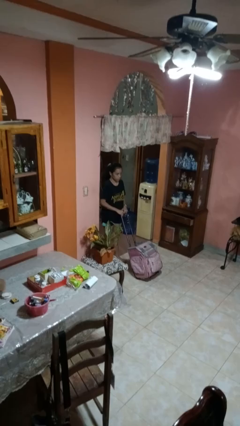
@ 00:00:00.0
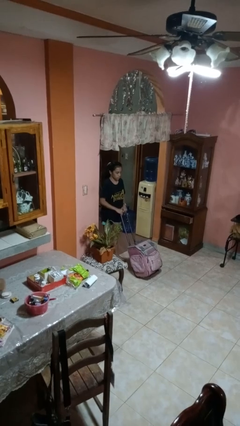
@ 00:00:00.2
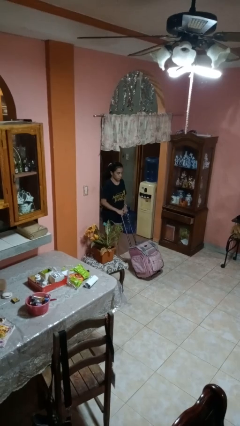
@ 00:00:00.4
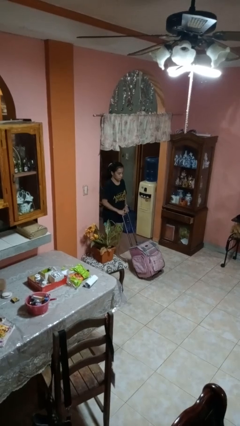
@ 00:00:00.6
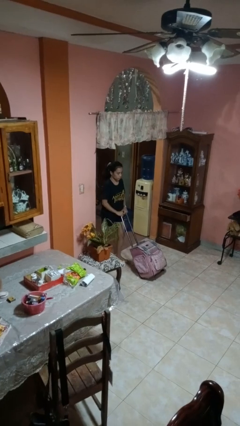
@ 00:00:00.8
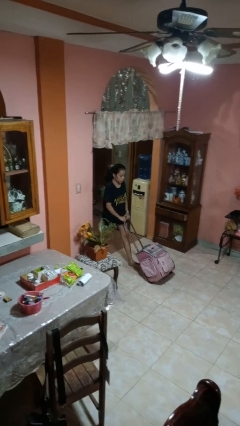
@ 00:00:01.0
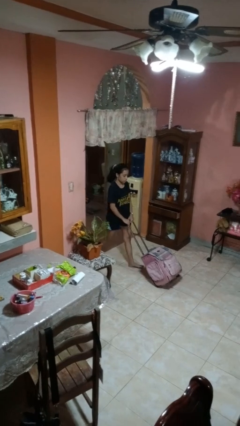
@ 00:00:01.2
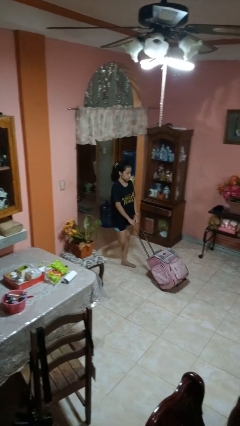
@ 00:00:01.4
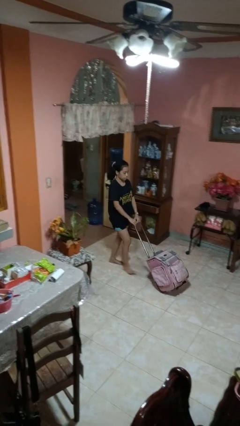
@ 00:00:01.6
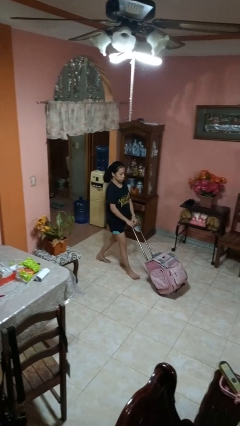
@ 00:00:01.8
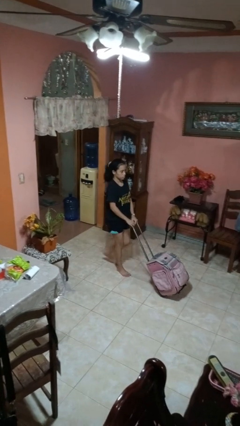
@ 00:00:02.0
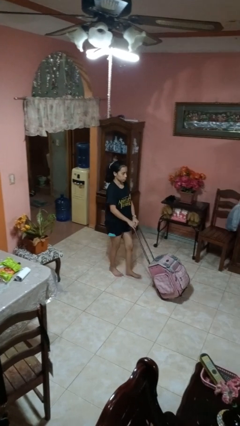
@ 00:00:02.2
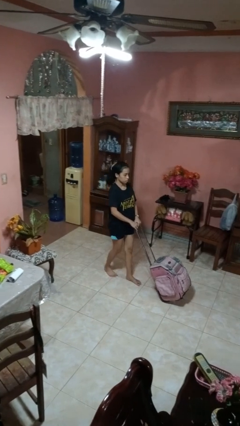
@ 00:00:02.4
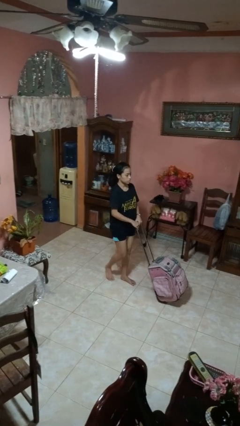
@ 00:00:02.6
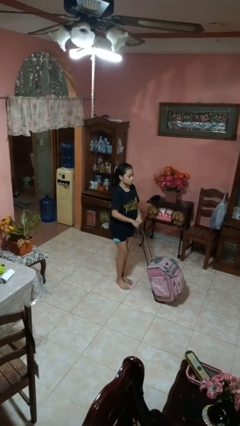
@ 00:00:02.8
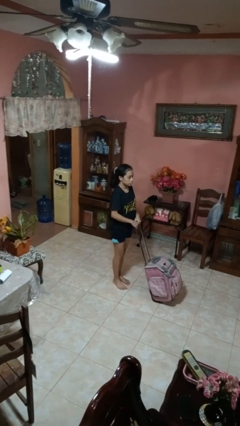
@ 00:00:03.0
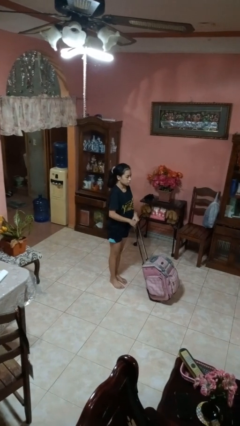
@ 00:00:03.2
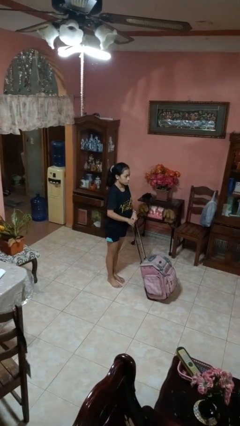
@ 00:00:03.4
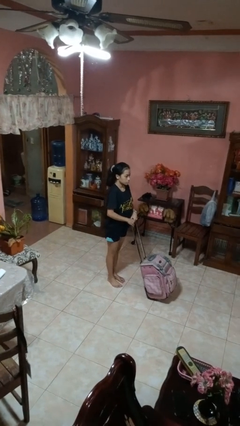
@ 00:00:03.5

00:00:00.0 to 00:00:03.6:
person pushes wheeled cart

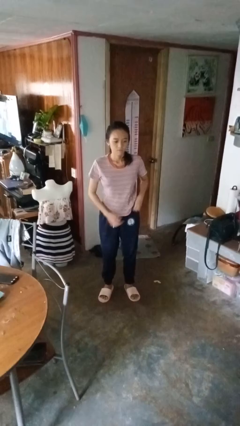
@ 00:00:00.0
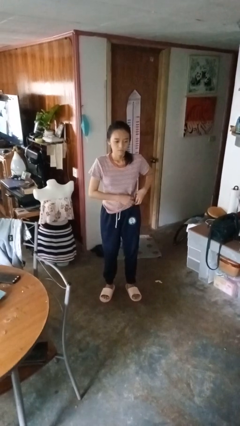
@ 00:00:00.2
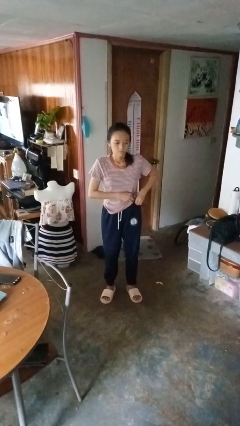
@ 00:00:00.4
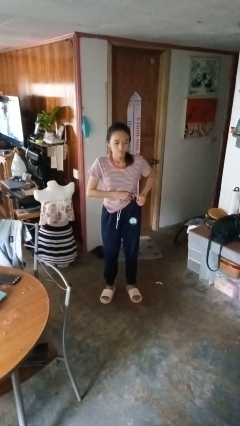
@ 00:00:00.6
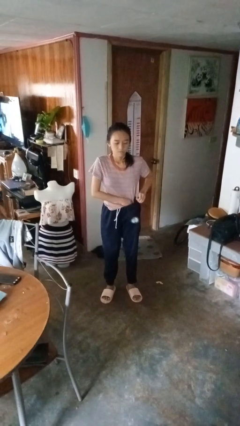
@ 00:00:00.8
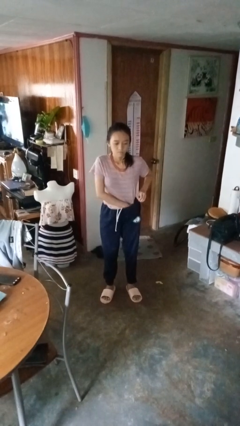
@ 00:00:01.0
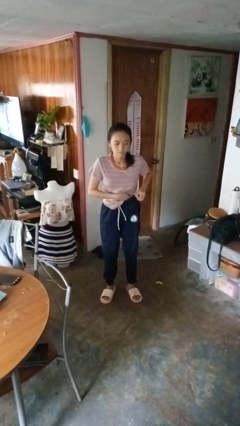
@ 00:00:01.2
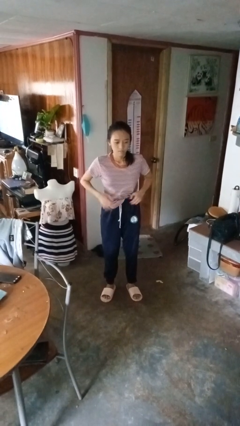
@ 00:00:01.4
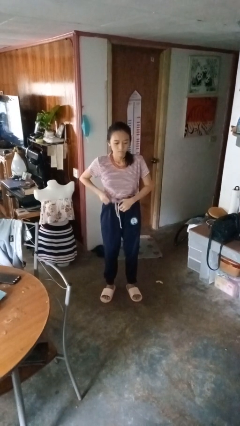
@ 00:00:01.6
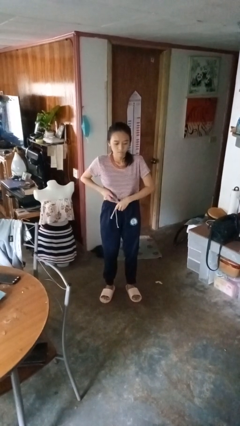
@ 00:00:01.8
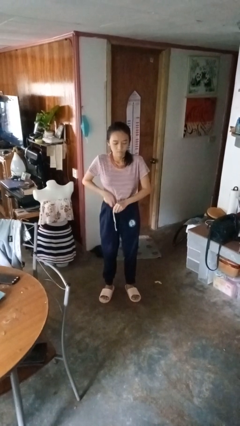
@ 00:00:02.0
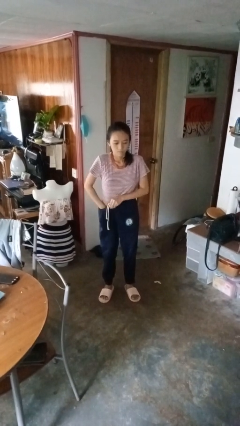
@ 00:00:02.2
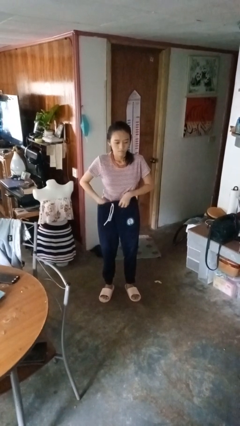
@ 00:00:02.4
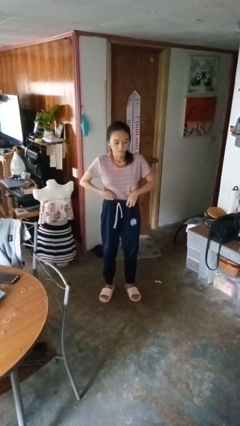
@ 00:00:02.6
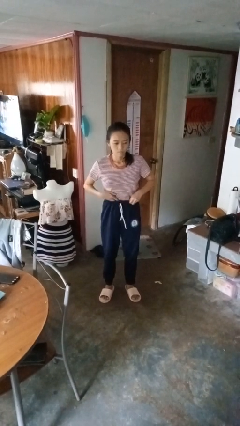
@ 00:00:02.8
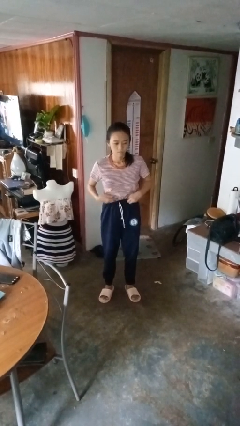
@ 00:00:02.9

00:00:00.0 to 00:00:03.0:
person tucks in shirt

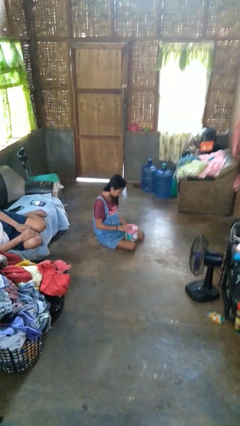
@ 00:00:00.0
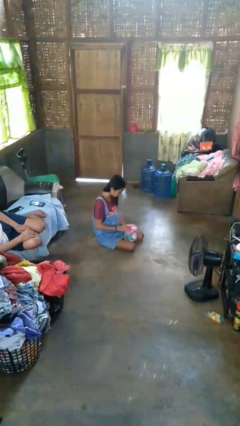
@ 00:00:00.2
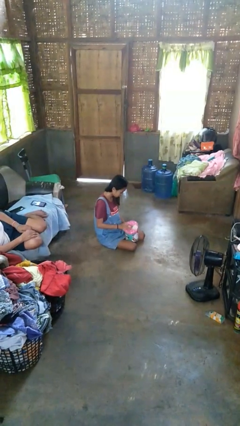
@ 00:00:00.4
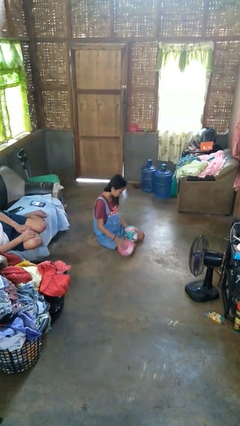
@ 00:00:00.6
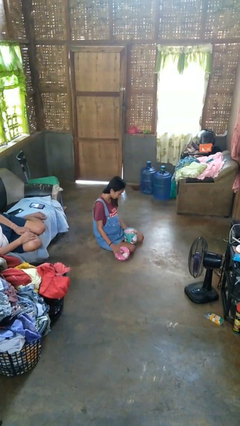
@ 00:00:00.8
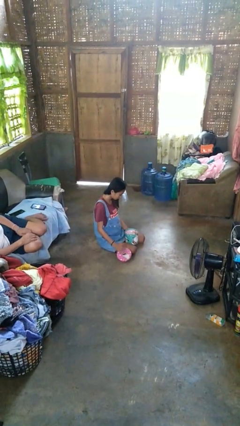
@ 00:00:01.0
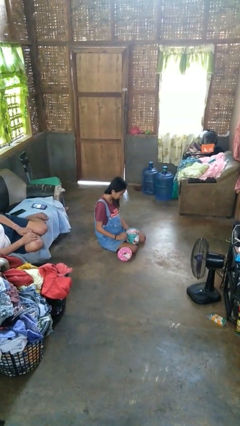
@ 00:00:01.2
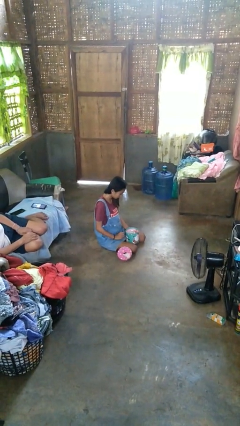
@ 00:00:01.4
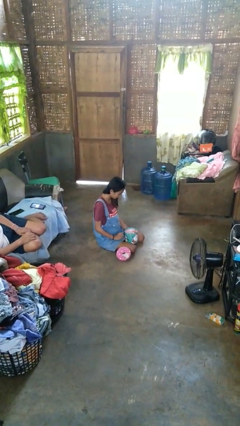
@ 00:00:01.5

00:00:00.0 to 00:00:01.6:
person opens jewelry box

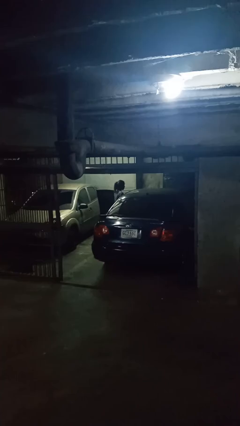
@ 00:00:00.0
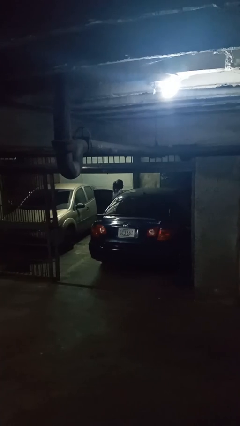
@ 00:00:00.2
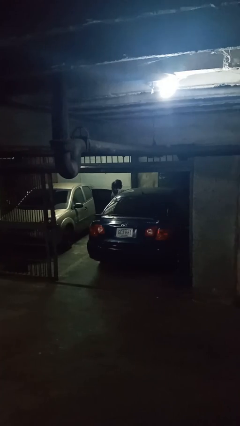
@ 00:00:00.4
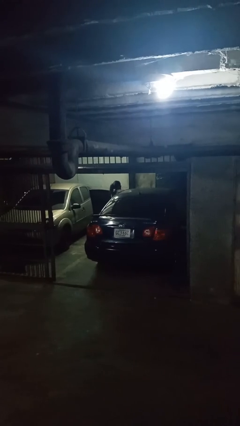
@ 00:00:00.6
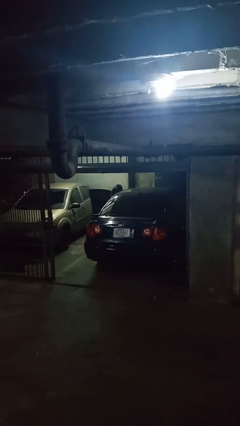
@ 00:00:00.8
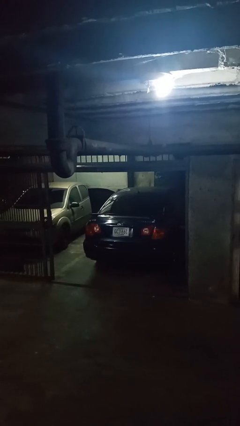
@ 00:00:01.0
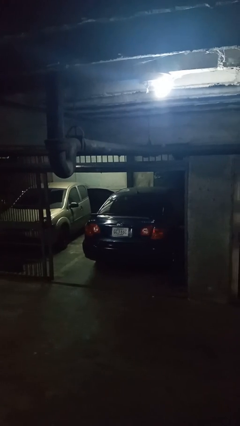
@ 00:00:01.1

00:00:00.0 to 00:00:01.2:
person enters car

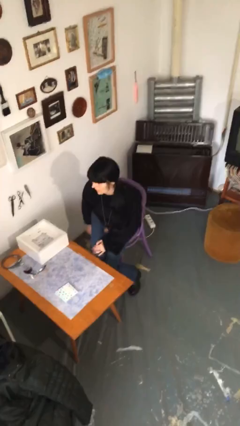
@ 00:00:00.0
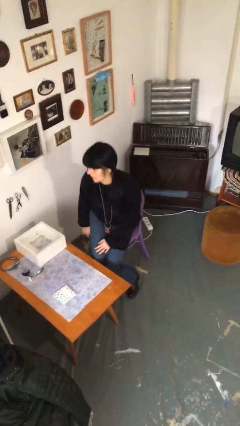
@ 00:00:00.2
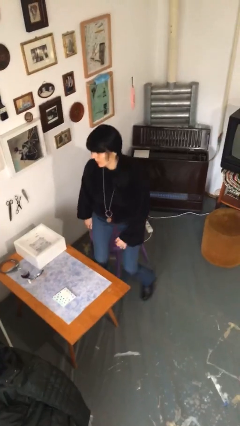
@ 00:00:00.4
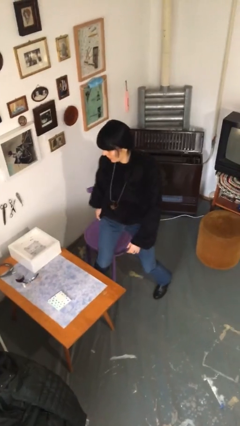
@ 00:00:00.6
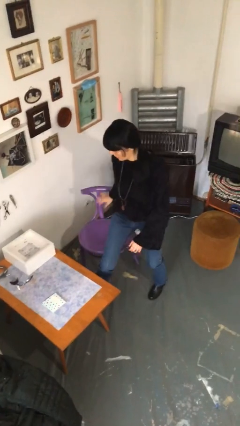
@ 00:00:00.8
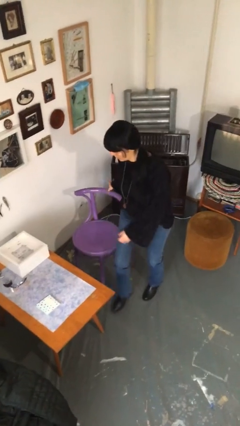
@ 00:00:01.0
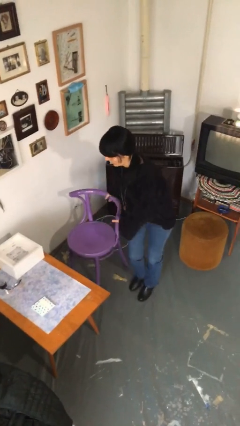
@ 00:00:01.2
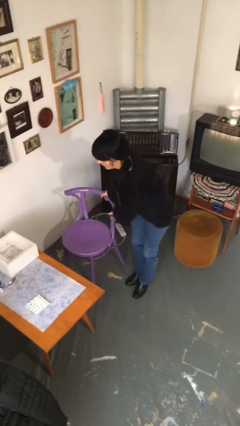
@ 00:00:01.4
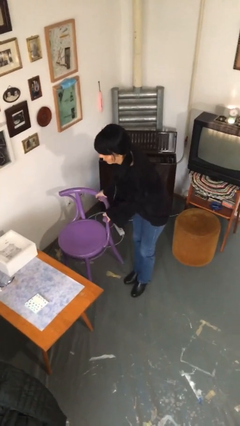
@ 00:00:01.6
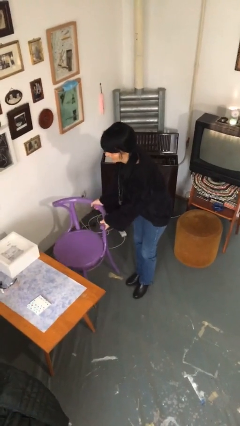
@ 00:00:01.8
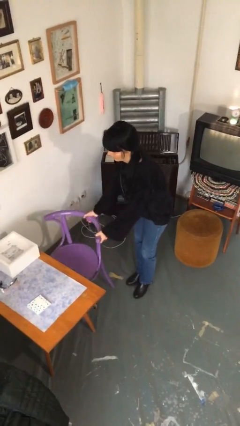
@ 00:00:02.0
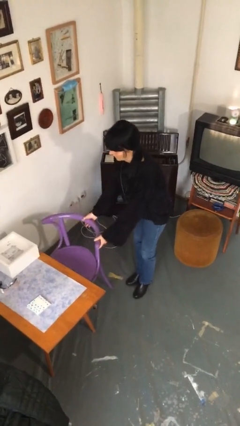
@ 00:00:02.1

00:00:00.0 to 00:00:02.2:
person stands up

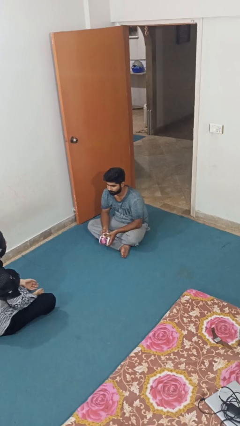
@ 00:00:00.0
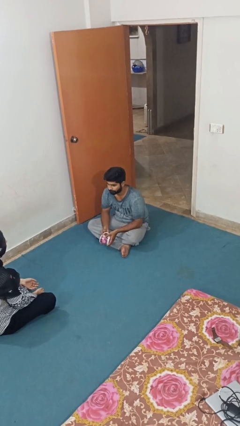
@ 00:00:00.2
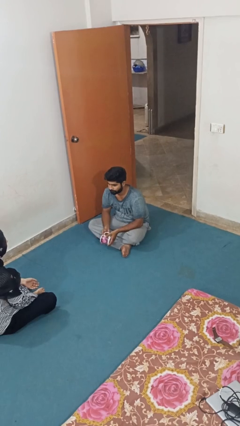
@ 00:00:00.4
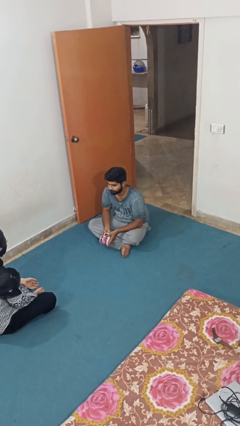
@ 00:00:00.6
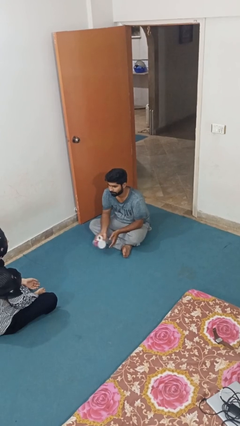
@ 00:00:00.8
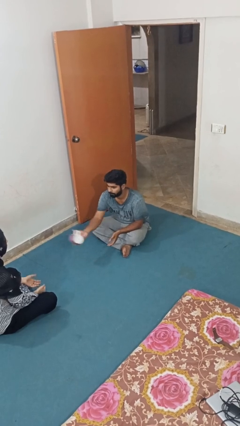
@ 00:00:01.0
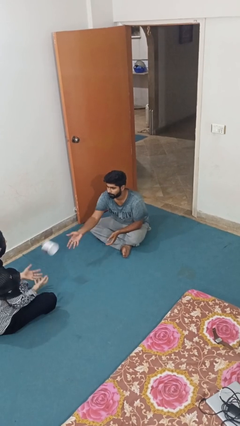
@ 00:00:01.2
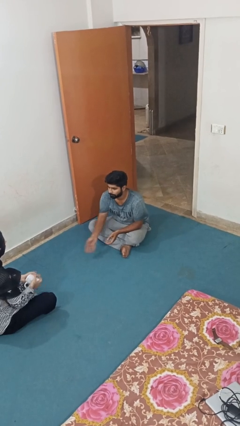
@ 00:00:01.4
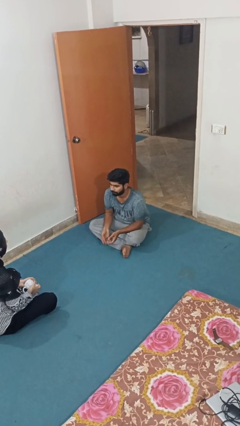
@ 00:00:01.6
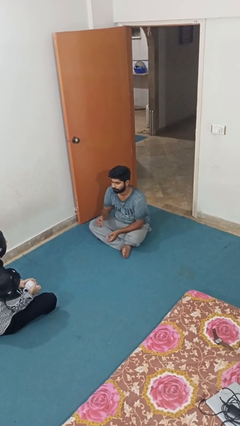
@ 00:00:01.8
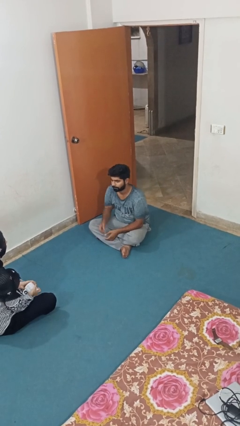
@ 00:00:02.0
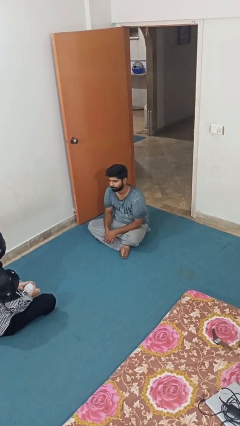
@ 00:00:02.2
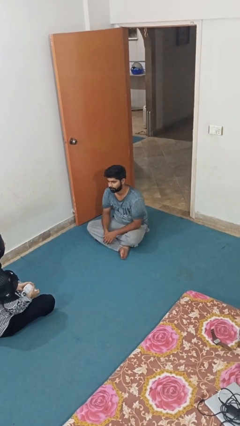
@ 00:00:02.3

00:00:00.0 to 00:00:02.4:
person throws object to person

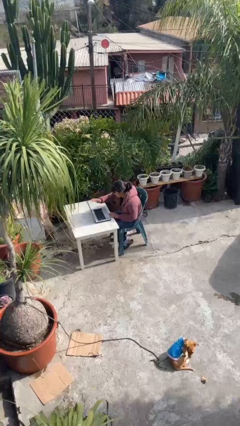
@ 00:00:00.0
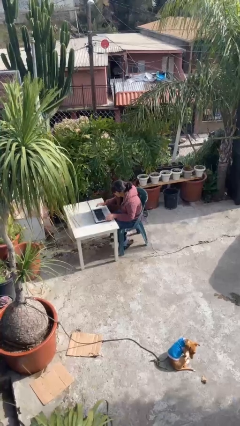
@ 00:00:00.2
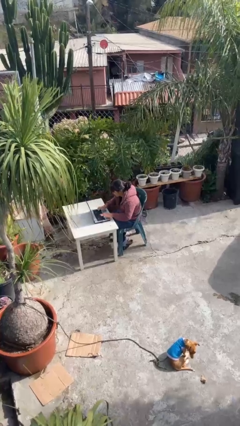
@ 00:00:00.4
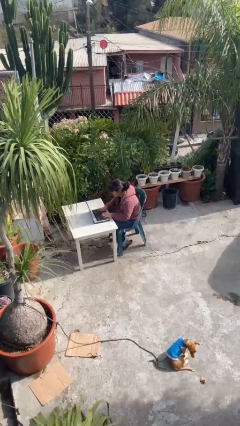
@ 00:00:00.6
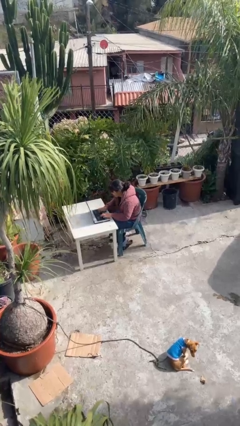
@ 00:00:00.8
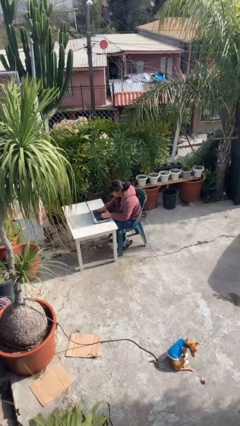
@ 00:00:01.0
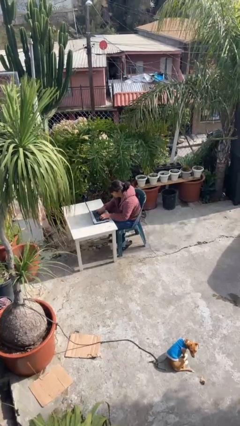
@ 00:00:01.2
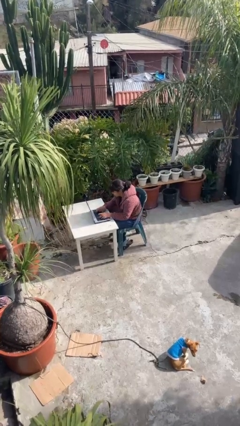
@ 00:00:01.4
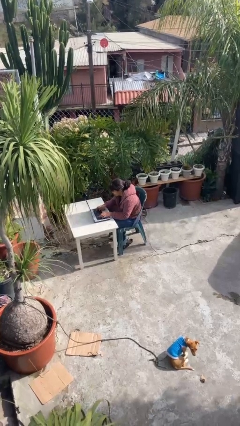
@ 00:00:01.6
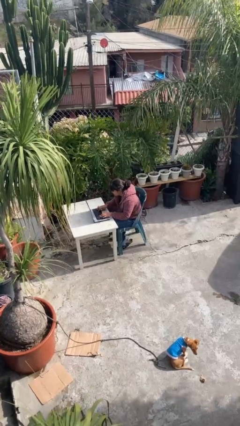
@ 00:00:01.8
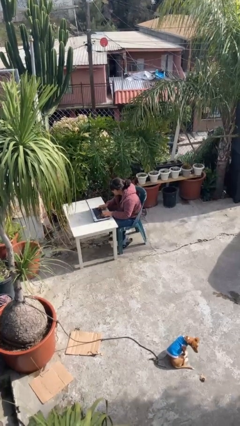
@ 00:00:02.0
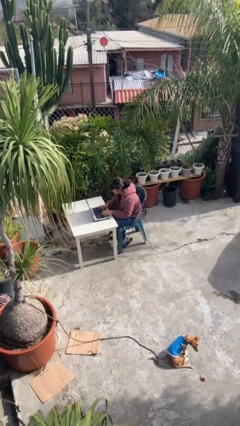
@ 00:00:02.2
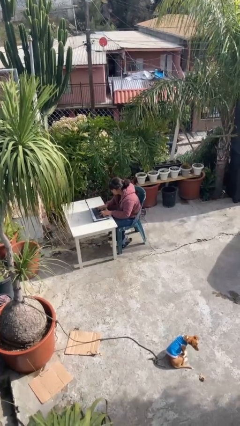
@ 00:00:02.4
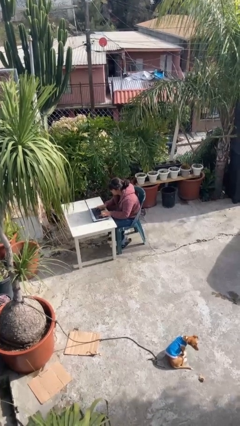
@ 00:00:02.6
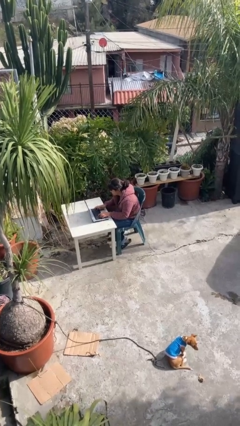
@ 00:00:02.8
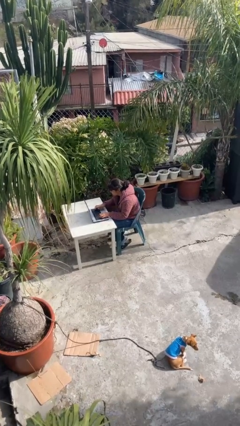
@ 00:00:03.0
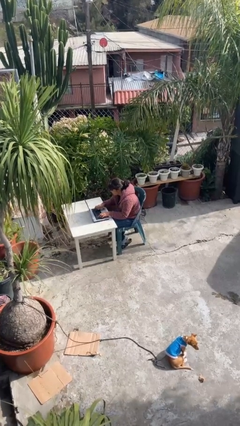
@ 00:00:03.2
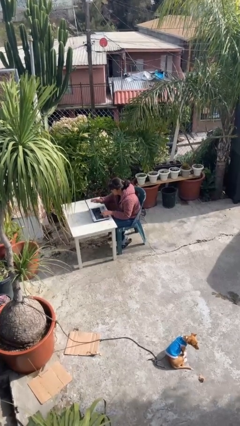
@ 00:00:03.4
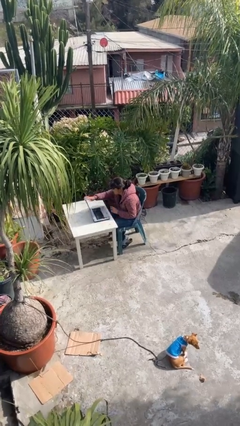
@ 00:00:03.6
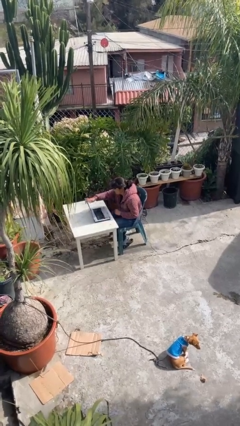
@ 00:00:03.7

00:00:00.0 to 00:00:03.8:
person interacts with laptop
